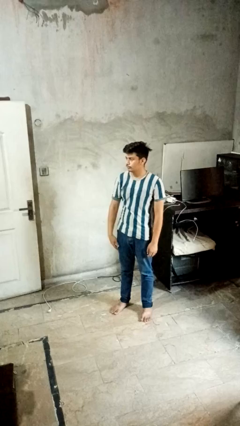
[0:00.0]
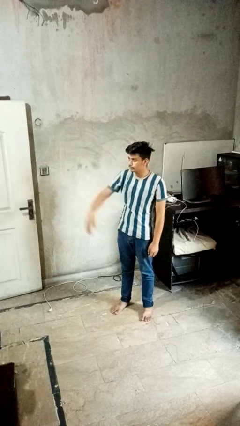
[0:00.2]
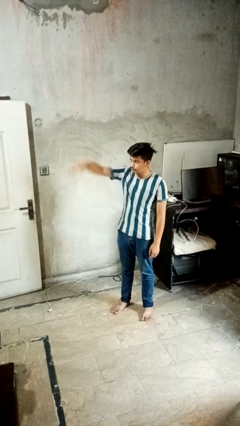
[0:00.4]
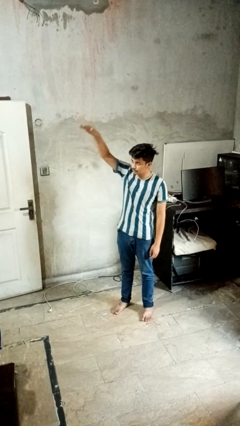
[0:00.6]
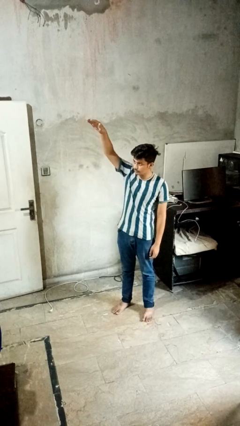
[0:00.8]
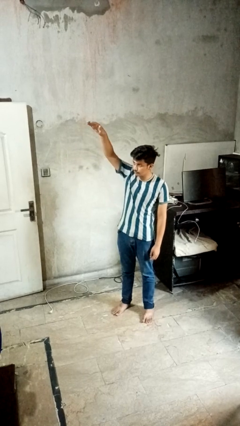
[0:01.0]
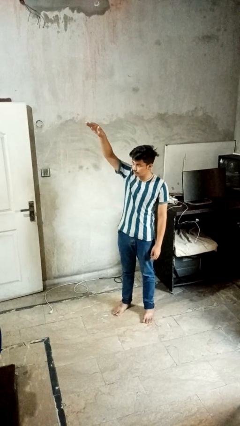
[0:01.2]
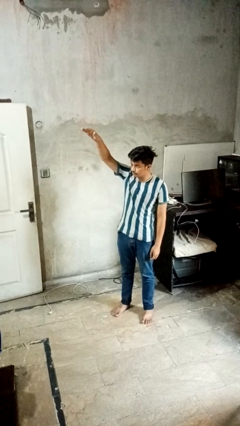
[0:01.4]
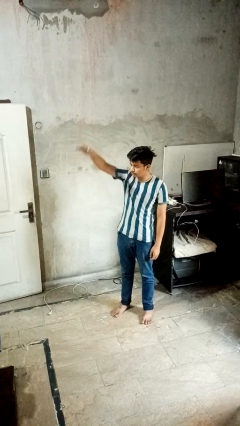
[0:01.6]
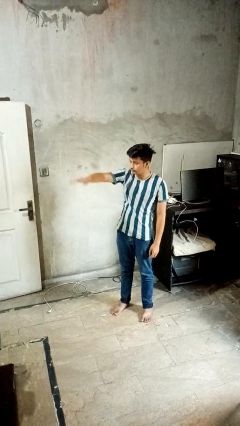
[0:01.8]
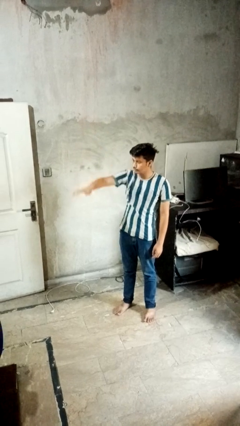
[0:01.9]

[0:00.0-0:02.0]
person gestures swipe up

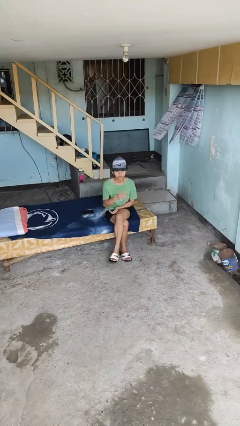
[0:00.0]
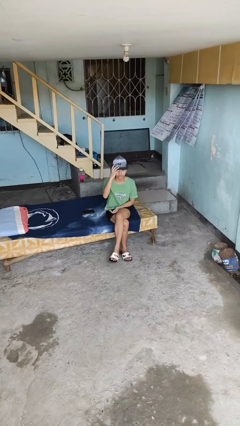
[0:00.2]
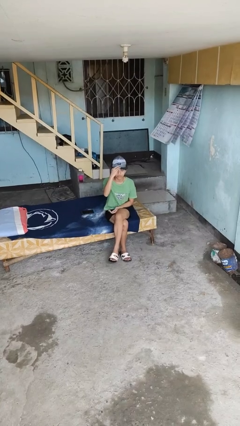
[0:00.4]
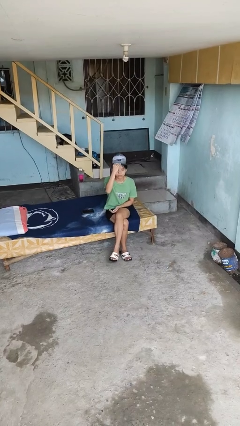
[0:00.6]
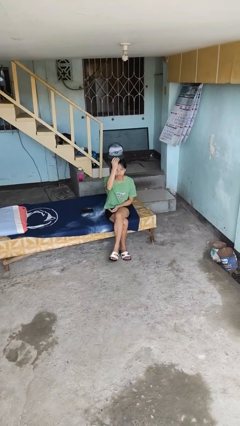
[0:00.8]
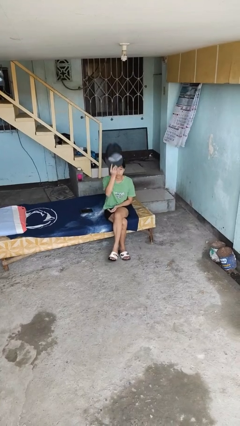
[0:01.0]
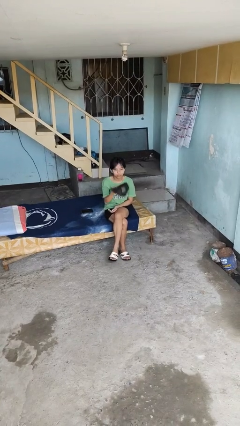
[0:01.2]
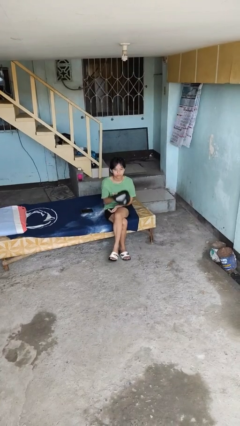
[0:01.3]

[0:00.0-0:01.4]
person takes off hat

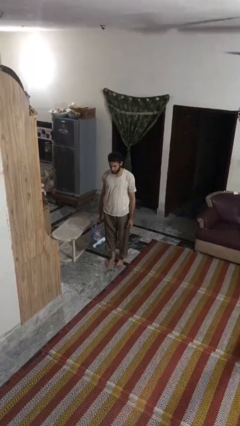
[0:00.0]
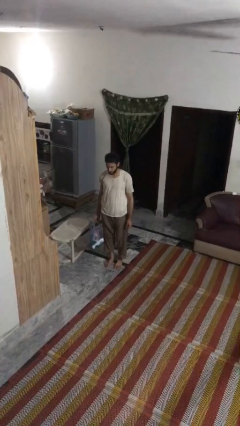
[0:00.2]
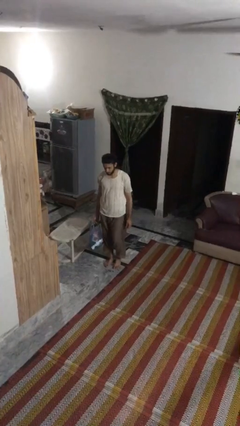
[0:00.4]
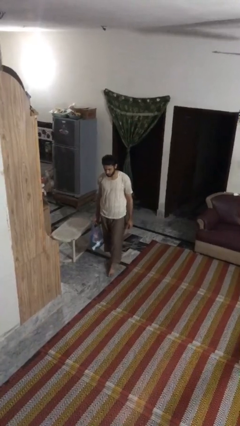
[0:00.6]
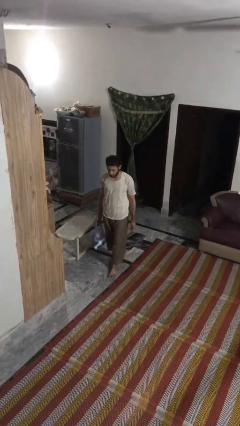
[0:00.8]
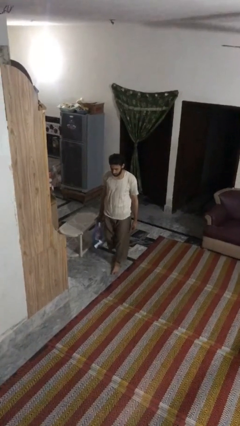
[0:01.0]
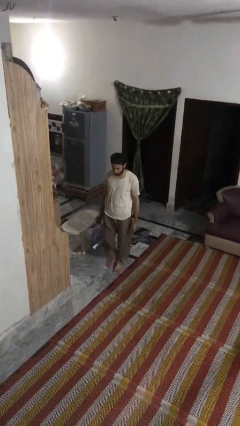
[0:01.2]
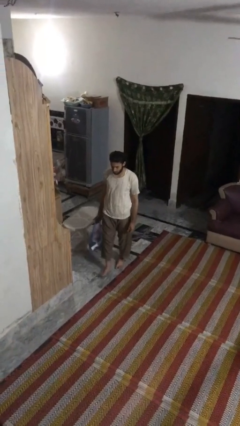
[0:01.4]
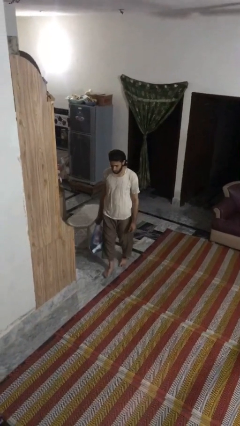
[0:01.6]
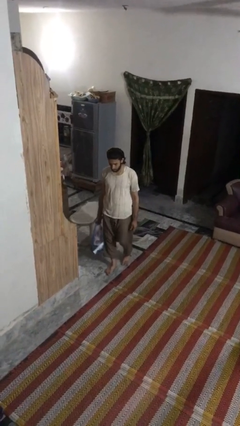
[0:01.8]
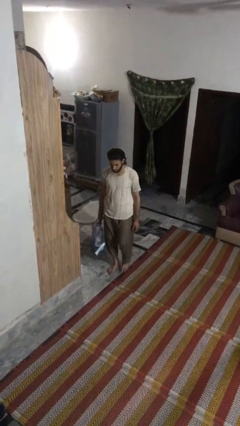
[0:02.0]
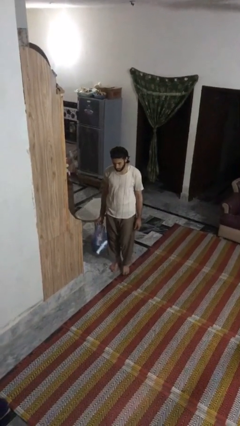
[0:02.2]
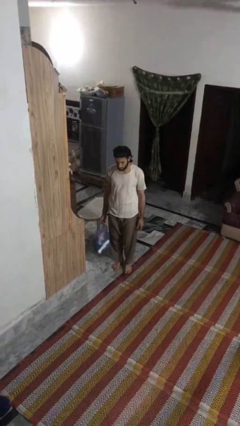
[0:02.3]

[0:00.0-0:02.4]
person carries groceries

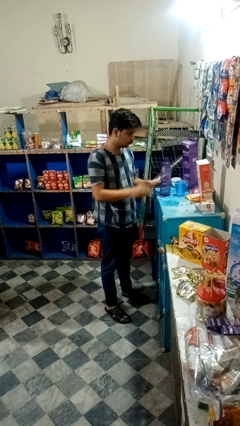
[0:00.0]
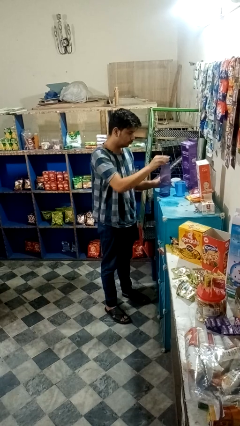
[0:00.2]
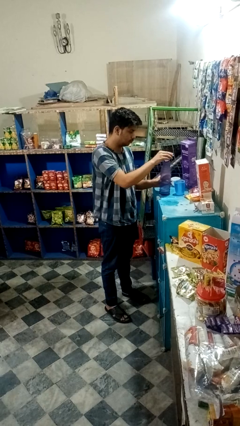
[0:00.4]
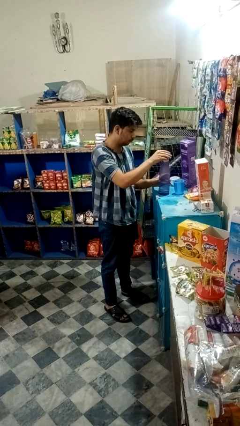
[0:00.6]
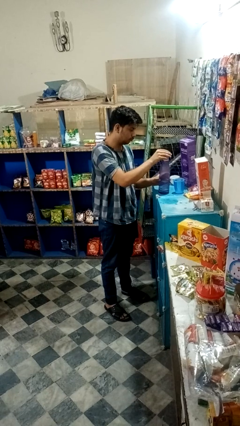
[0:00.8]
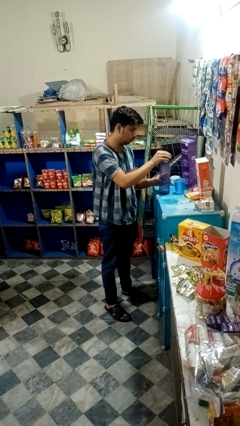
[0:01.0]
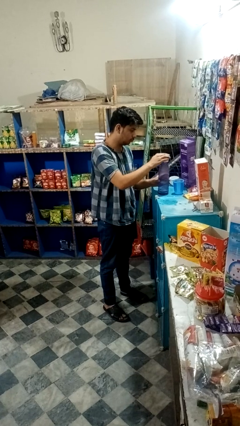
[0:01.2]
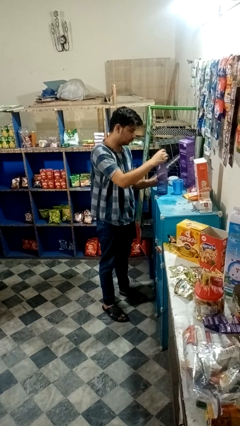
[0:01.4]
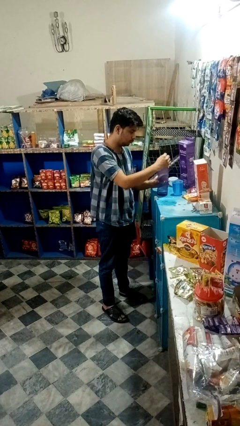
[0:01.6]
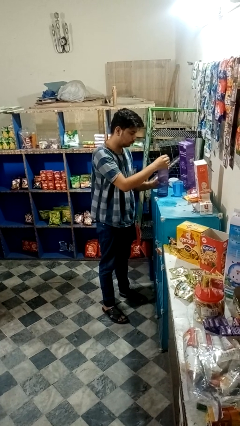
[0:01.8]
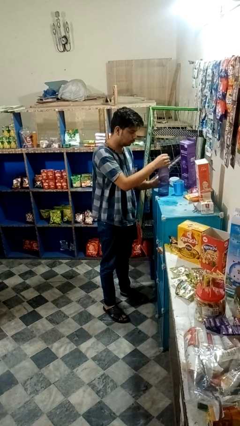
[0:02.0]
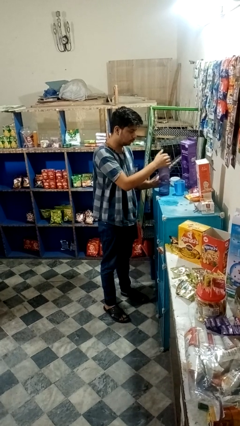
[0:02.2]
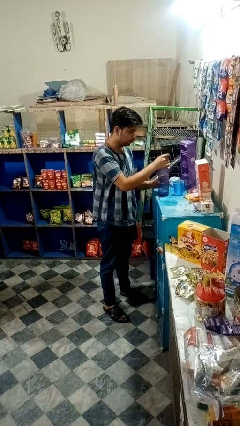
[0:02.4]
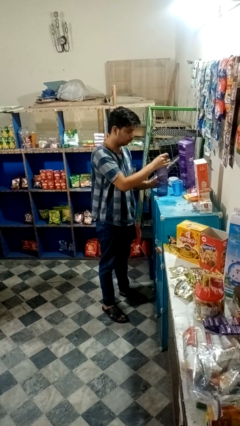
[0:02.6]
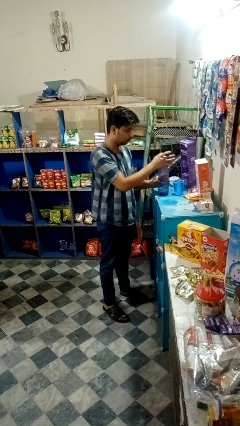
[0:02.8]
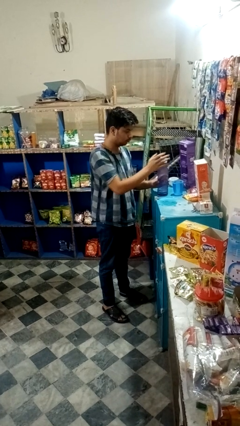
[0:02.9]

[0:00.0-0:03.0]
person screws lid to bottle

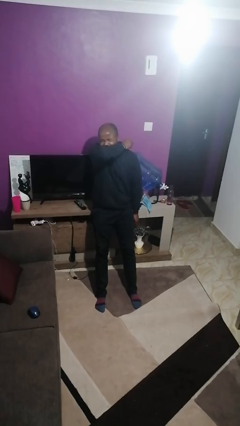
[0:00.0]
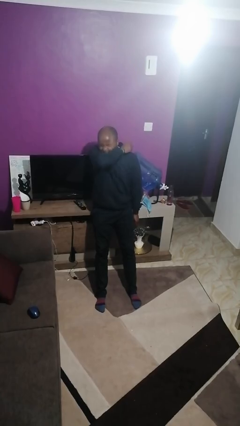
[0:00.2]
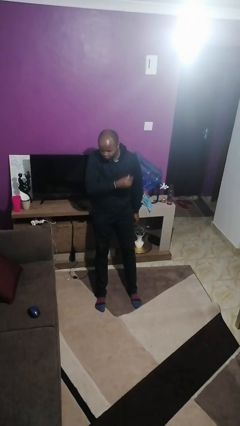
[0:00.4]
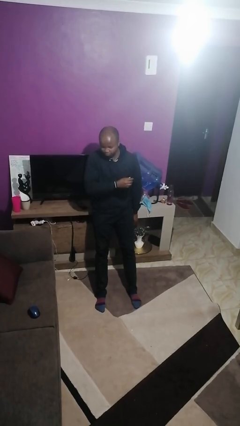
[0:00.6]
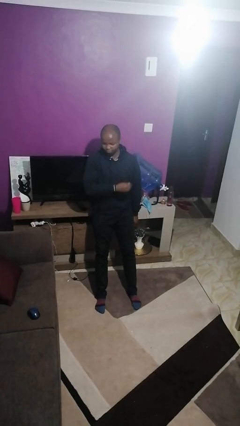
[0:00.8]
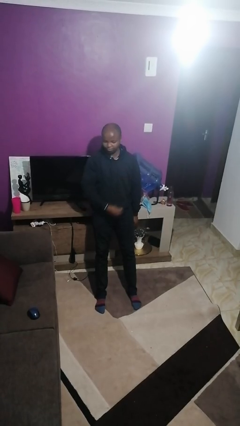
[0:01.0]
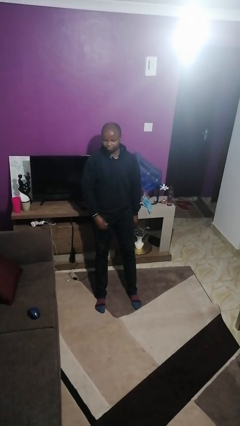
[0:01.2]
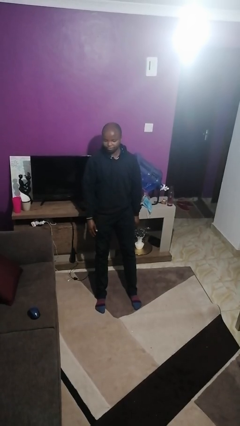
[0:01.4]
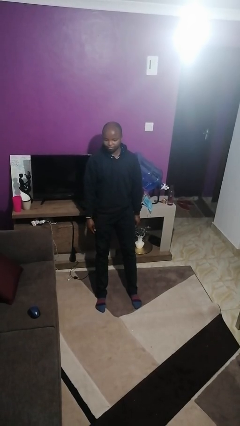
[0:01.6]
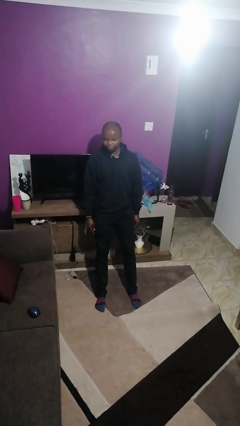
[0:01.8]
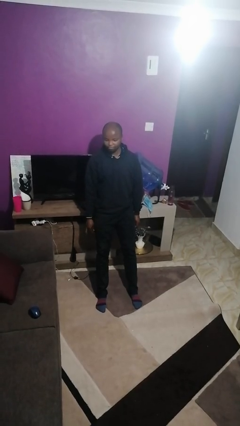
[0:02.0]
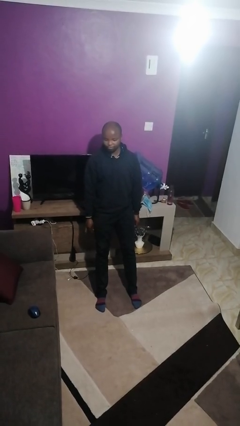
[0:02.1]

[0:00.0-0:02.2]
person sneezes into hand

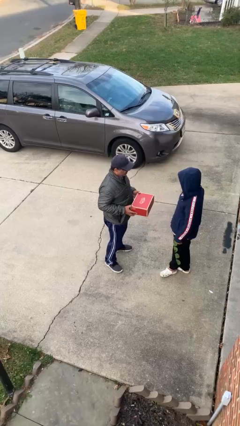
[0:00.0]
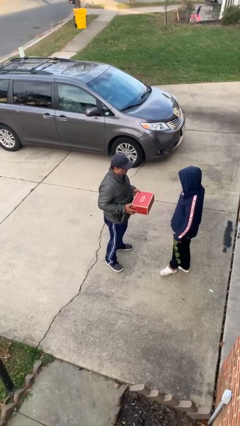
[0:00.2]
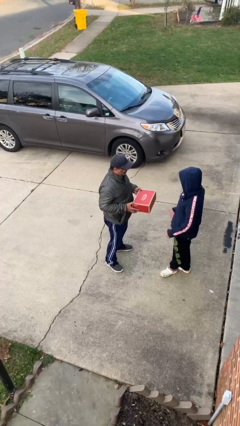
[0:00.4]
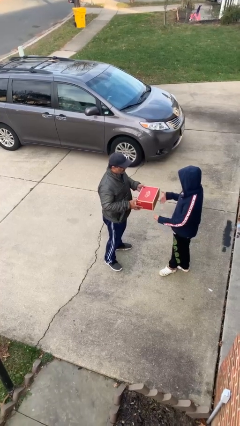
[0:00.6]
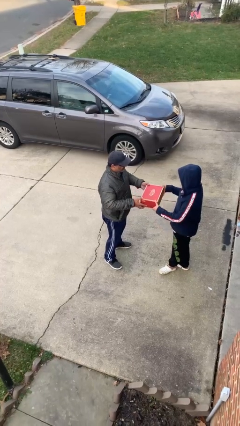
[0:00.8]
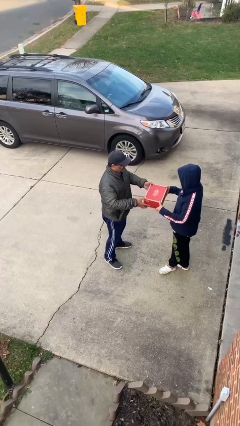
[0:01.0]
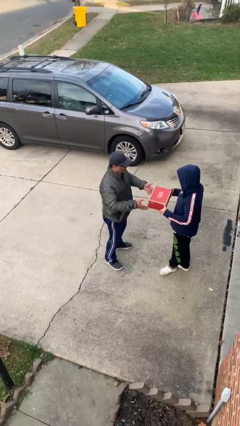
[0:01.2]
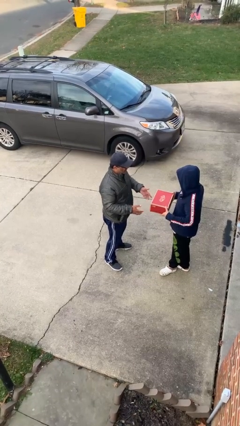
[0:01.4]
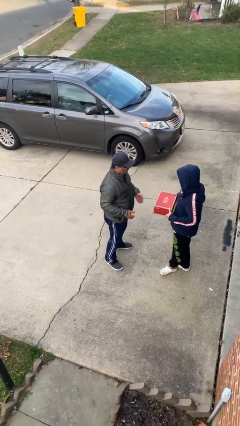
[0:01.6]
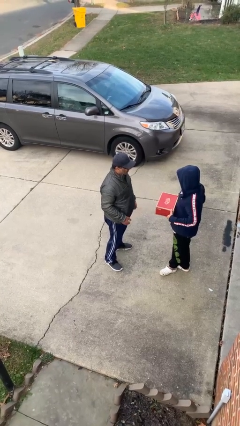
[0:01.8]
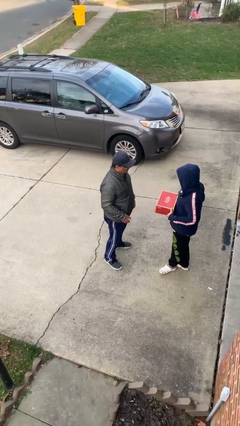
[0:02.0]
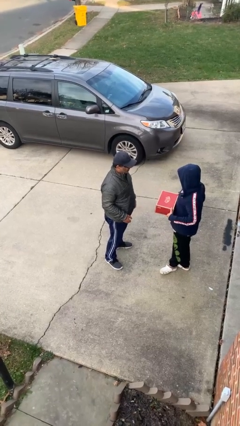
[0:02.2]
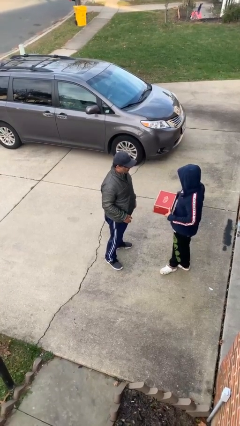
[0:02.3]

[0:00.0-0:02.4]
person transfers object to person

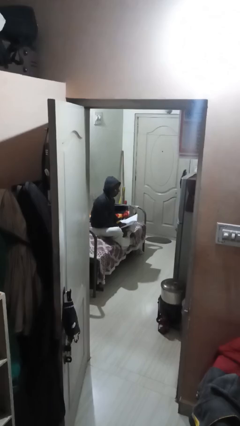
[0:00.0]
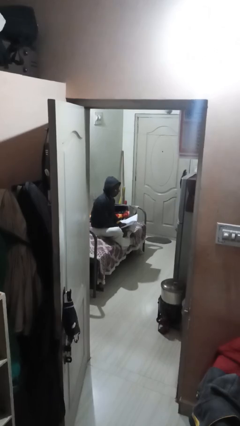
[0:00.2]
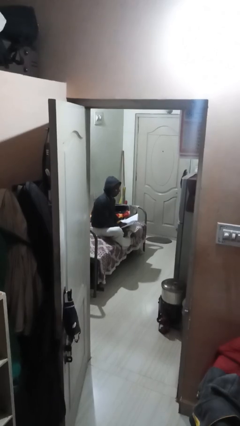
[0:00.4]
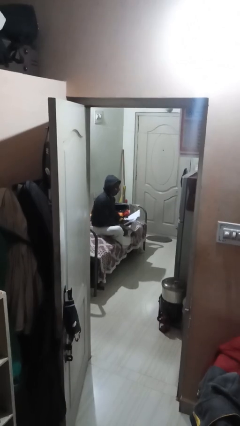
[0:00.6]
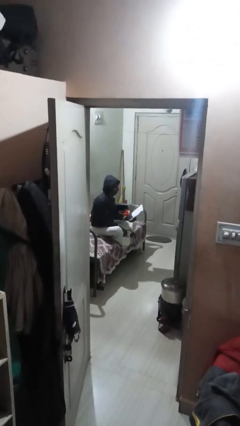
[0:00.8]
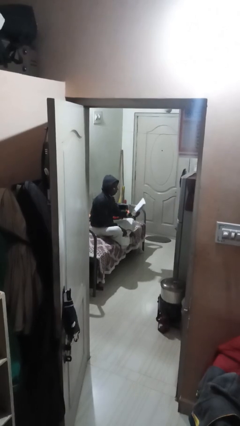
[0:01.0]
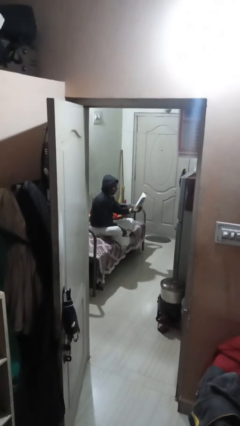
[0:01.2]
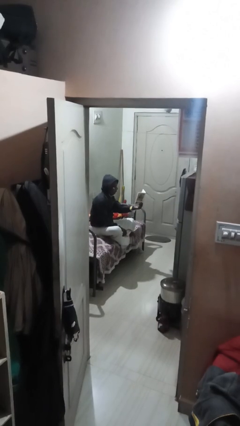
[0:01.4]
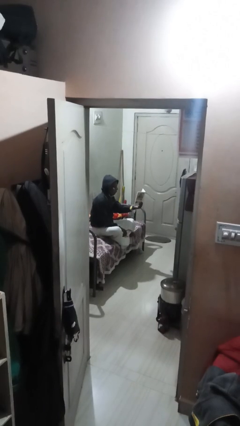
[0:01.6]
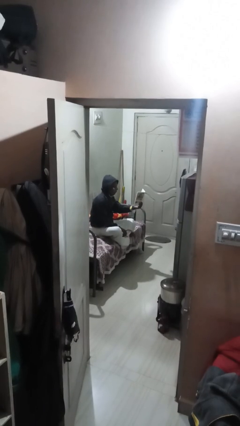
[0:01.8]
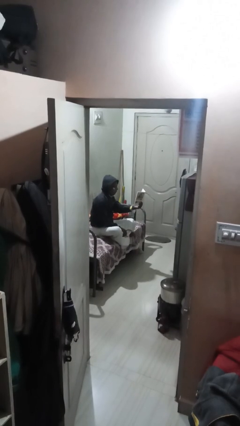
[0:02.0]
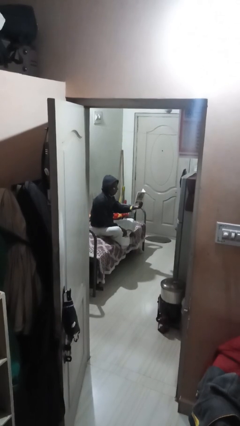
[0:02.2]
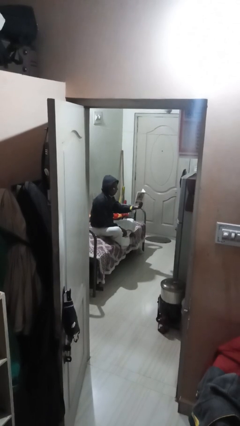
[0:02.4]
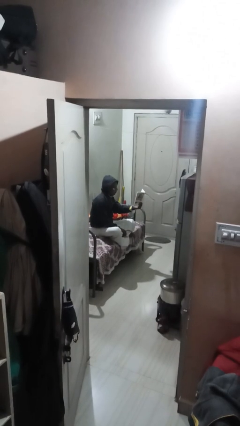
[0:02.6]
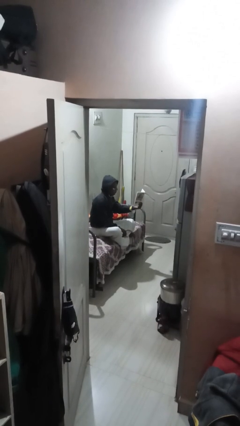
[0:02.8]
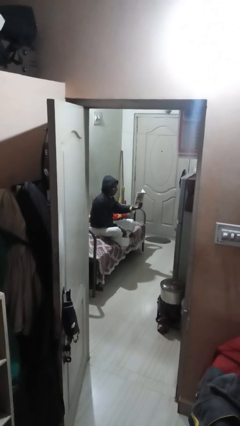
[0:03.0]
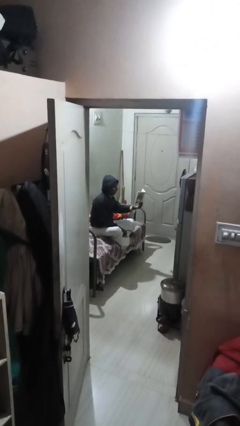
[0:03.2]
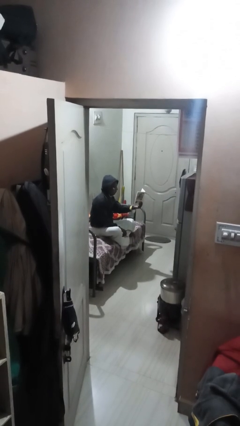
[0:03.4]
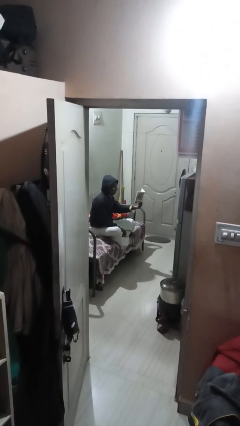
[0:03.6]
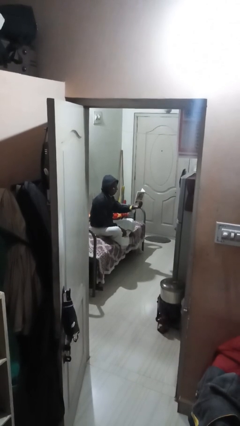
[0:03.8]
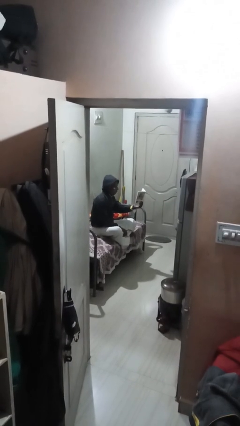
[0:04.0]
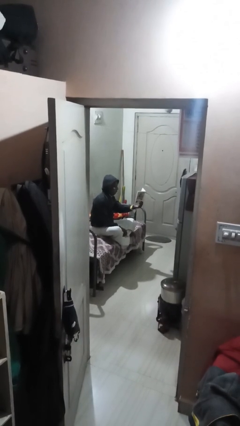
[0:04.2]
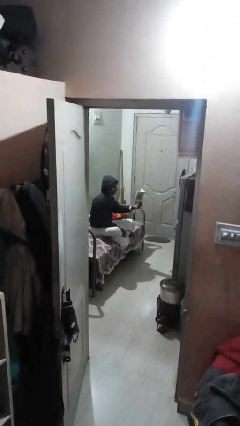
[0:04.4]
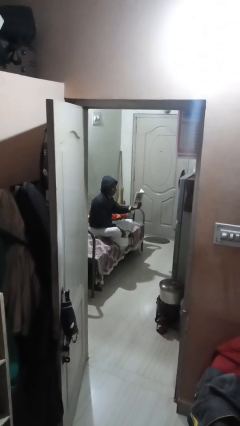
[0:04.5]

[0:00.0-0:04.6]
person reads document
